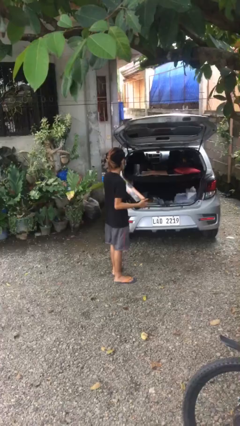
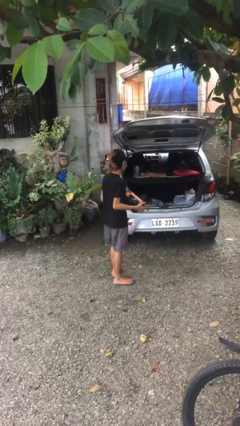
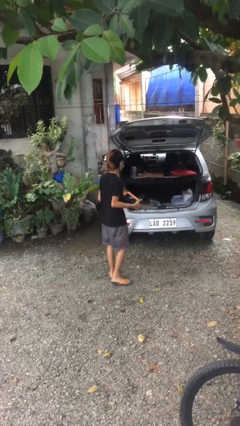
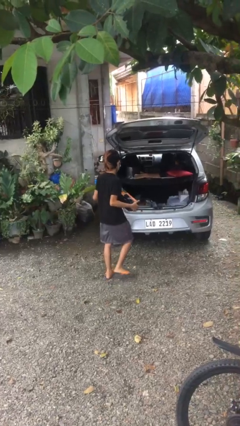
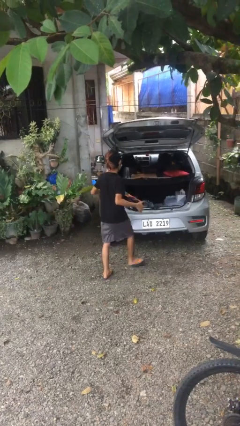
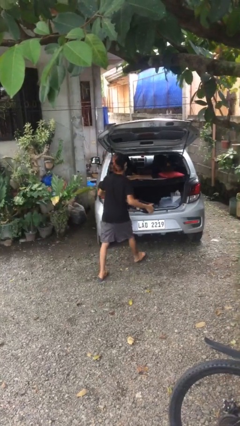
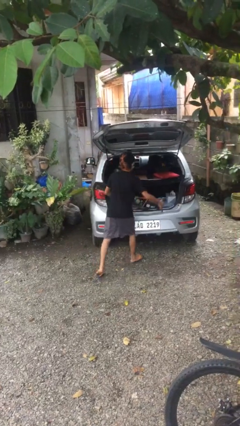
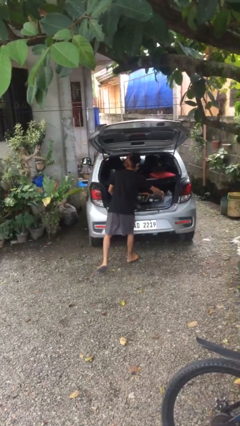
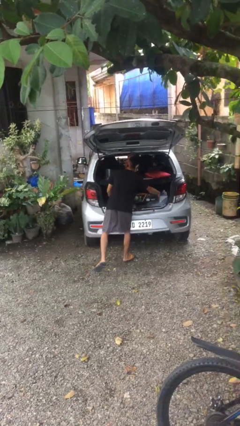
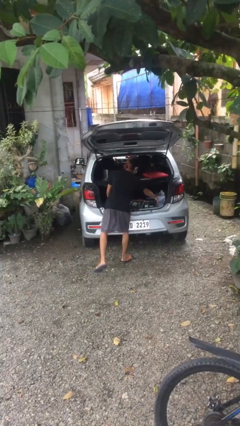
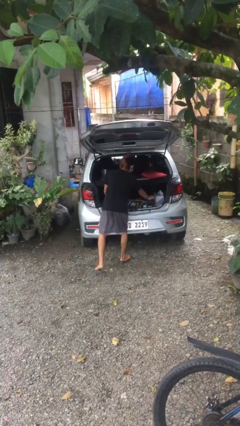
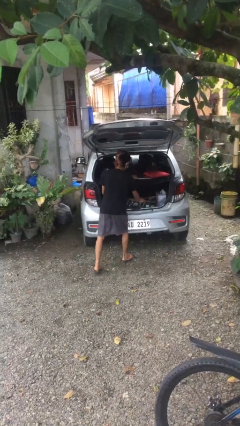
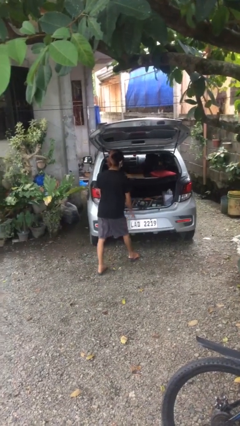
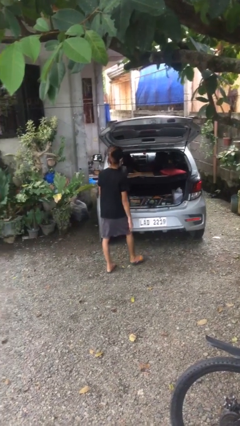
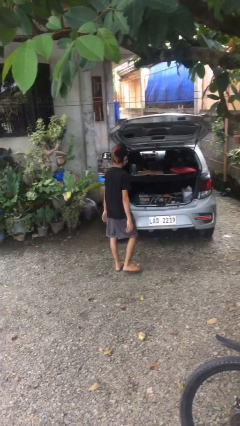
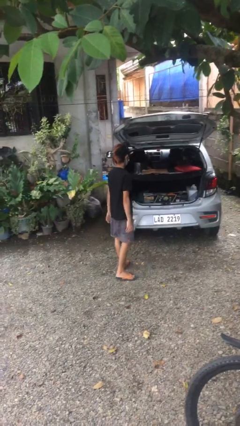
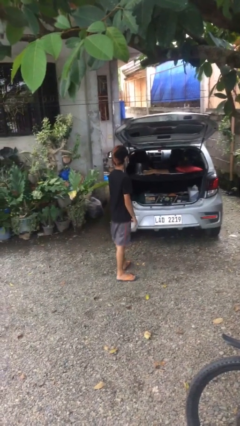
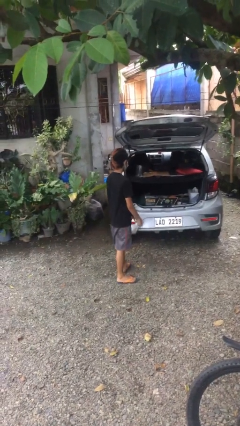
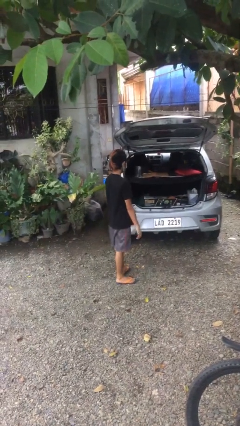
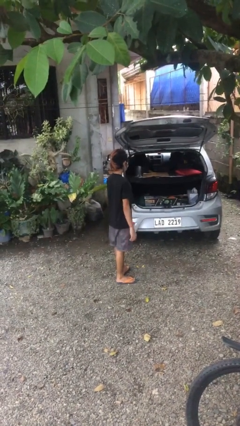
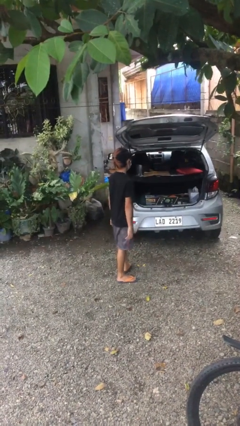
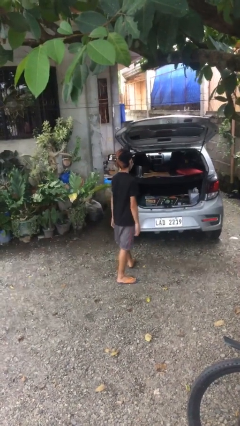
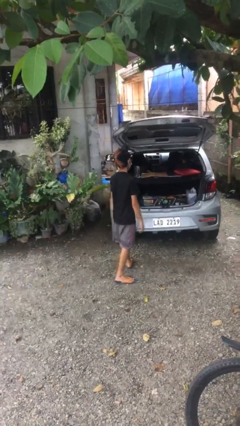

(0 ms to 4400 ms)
person loads car

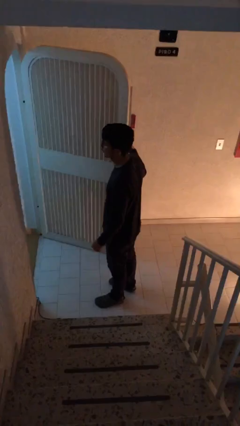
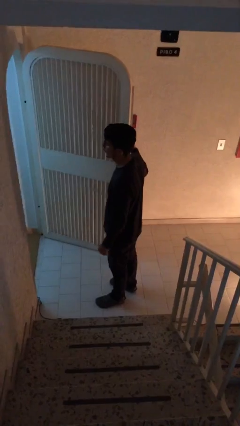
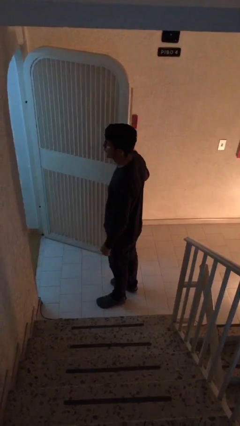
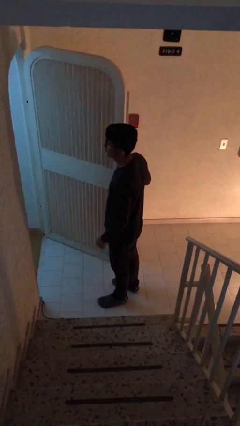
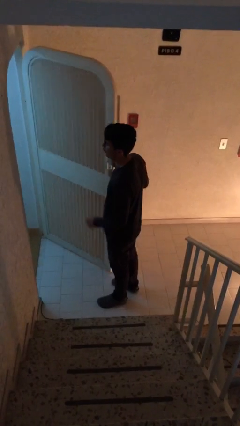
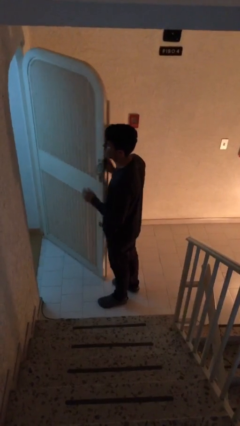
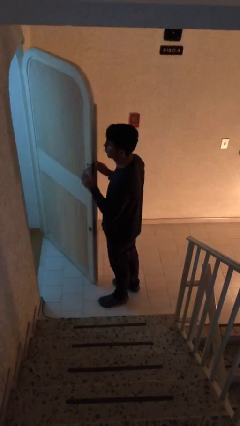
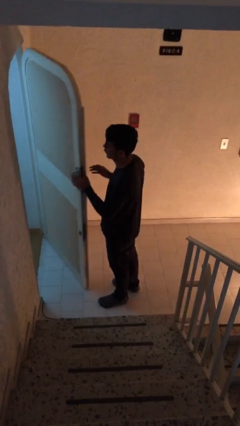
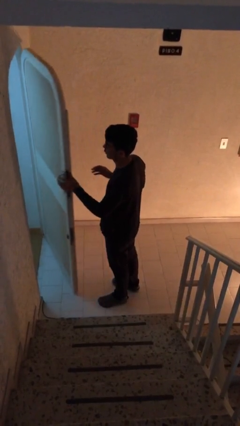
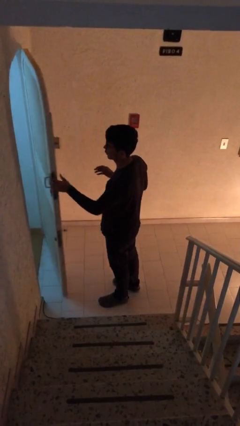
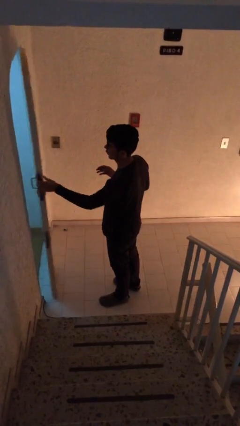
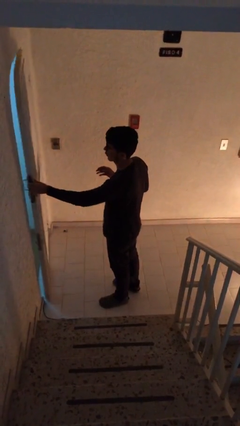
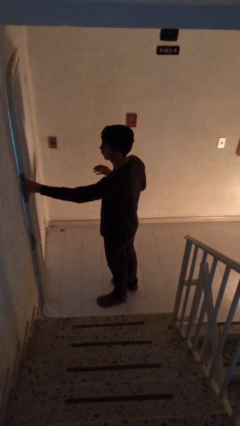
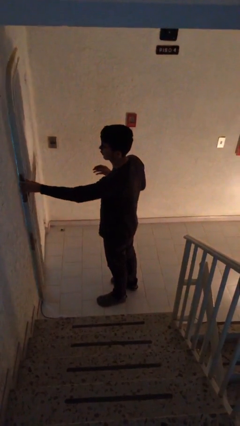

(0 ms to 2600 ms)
person closes facility door

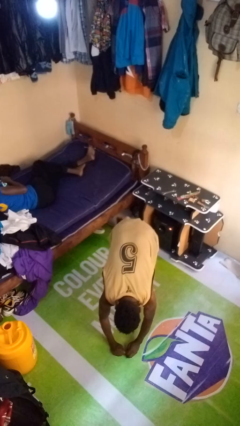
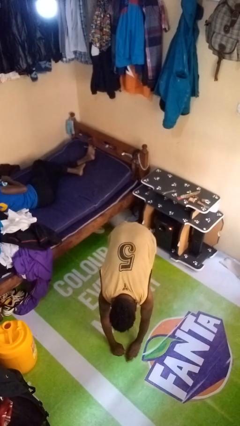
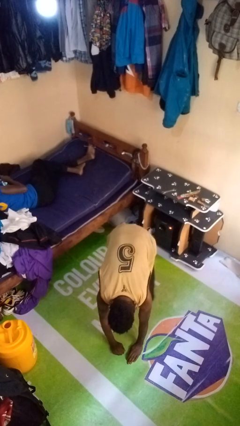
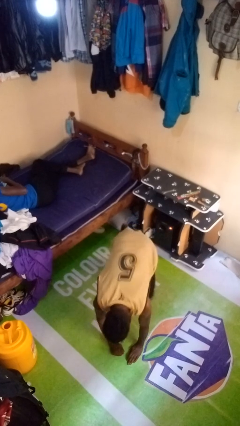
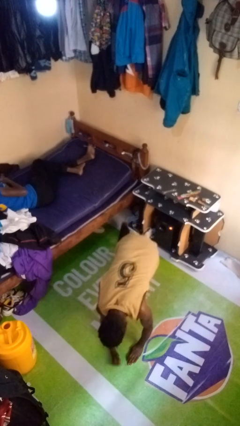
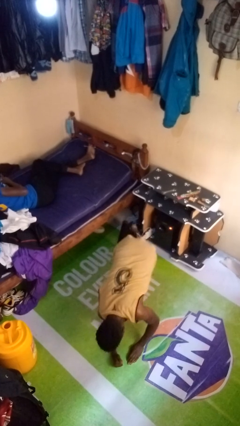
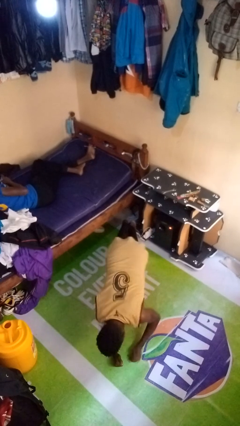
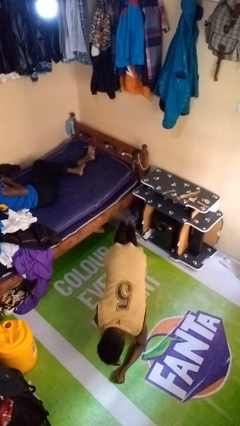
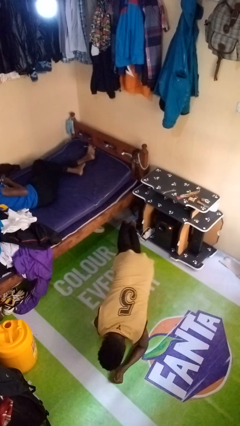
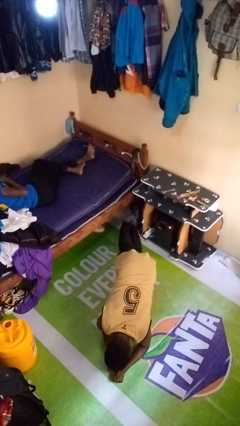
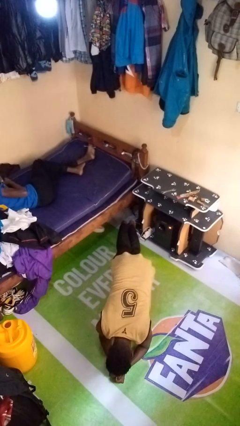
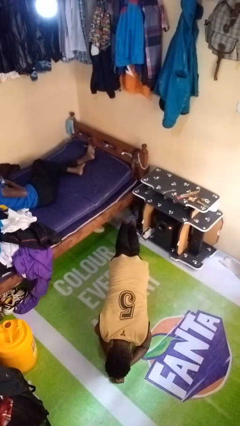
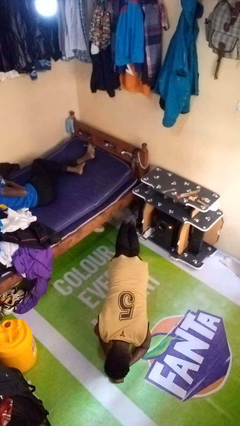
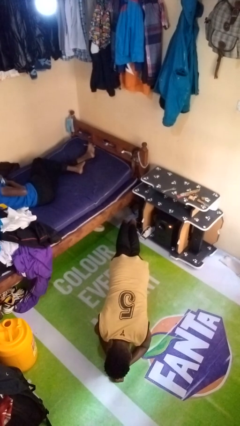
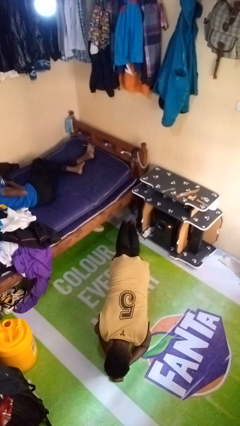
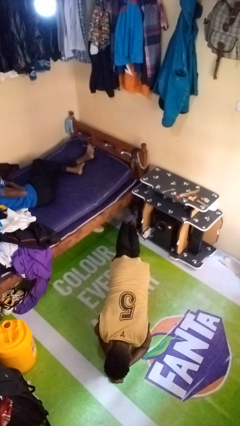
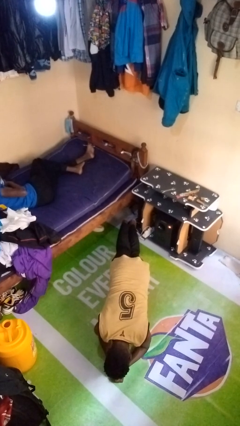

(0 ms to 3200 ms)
person exercises with plank

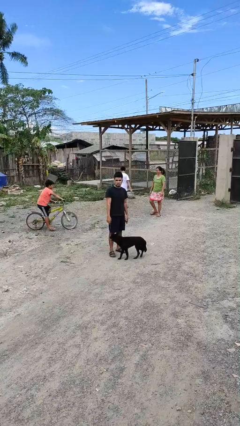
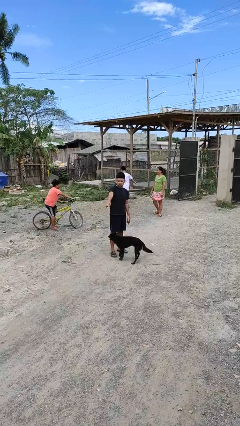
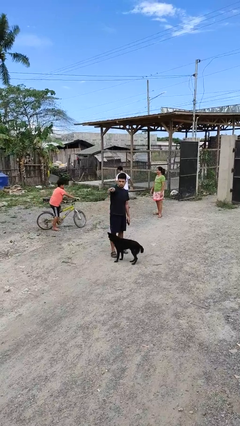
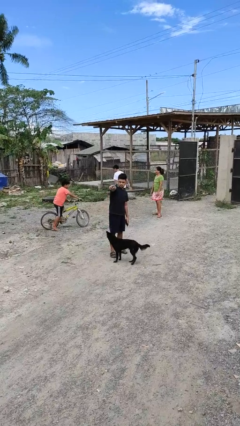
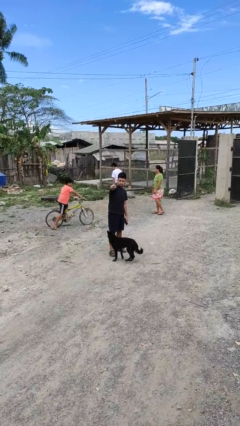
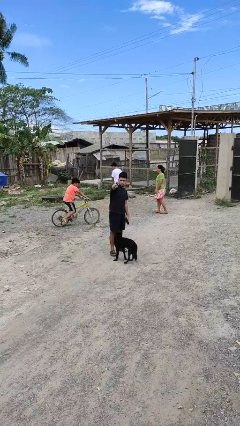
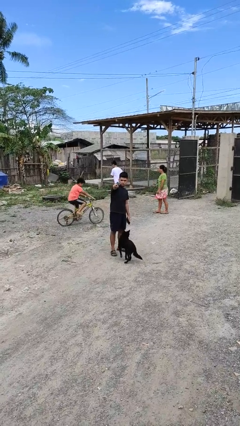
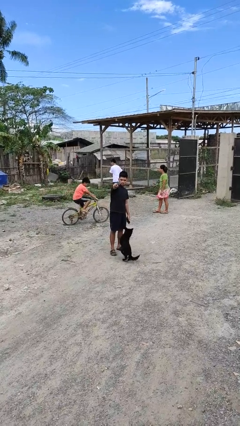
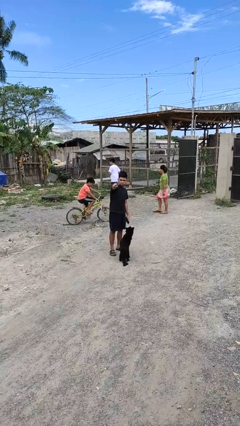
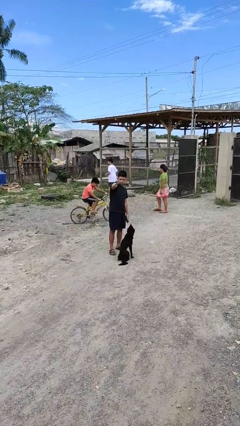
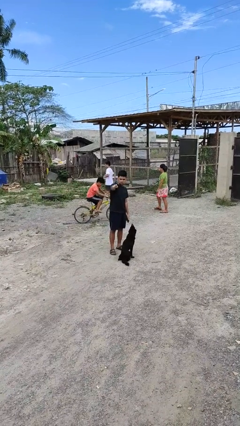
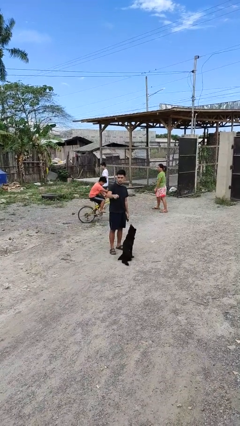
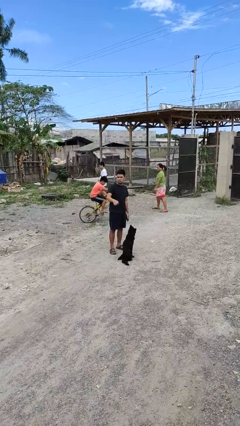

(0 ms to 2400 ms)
person points at person

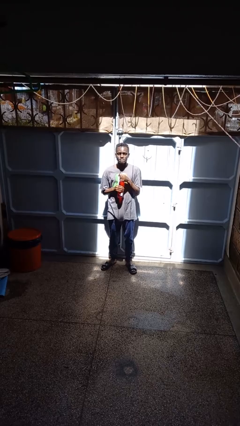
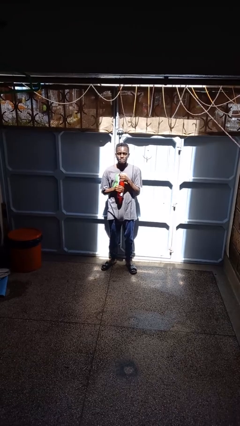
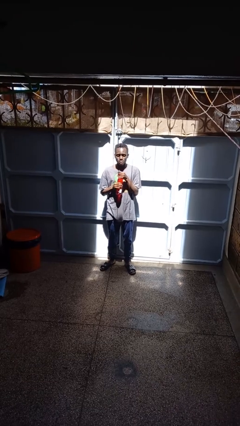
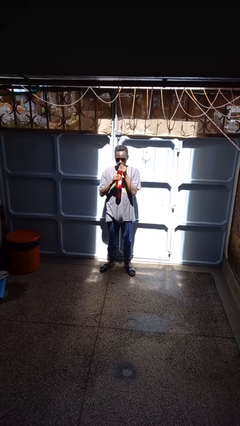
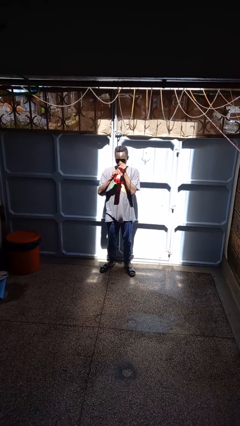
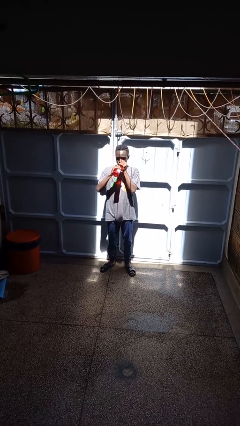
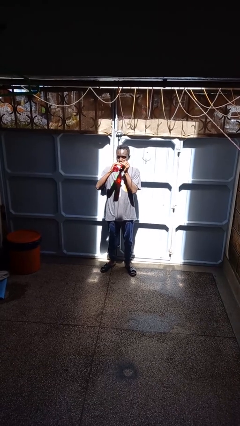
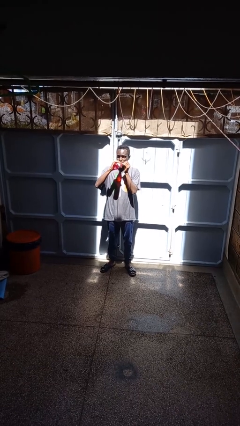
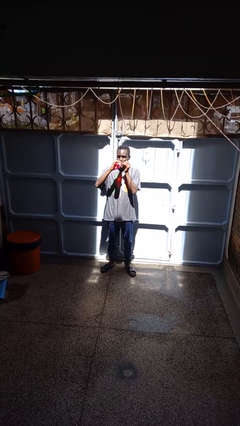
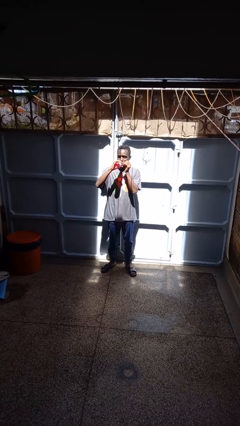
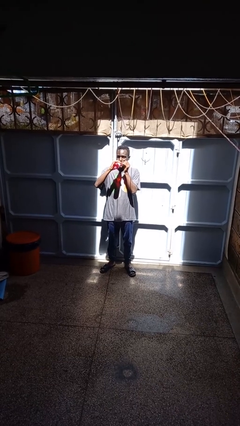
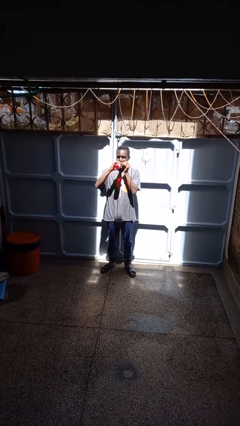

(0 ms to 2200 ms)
person drinks from beverage can

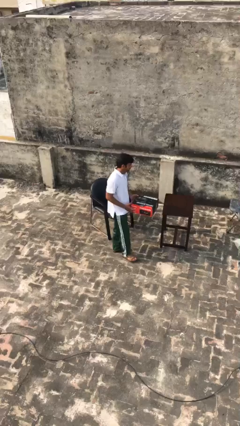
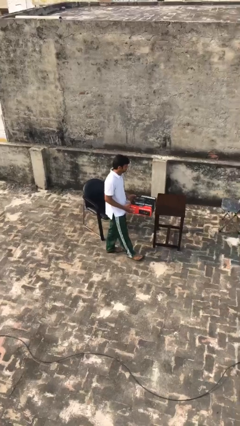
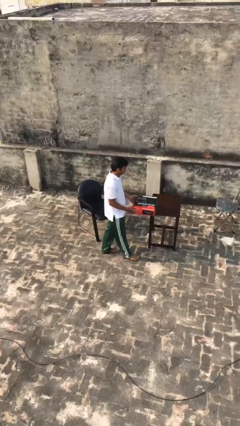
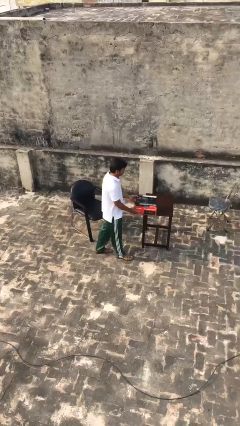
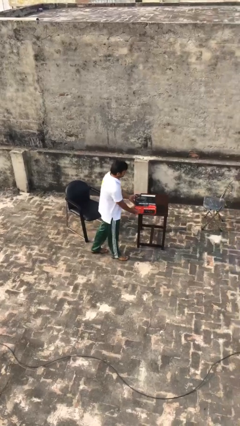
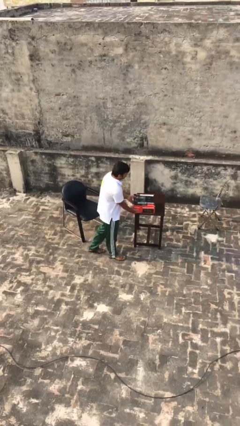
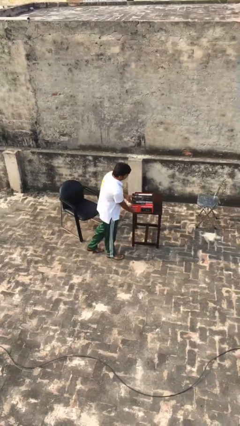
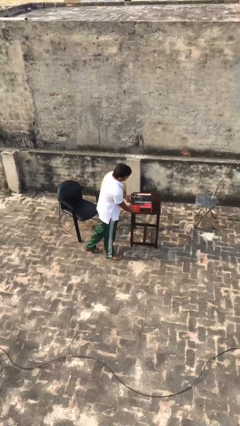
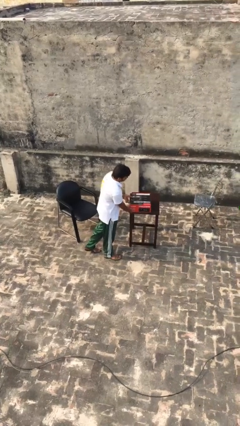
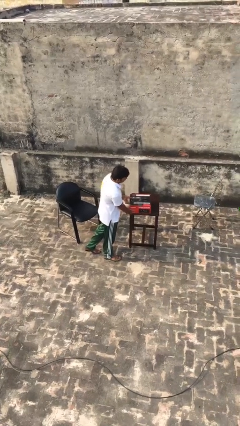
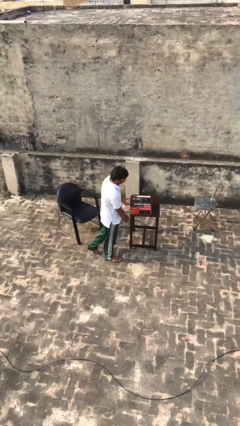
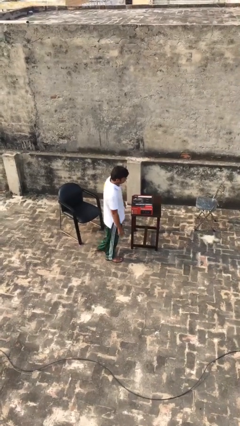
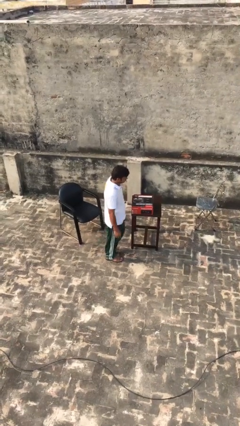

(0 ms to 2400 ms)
person puts down object on table
